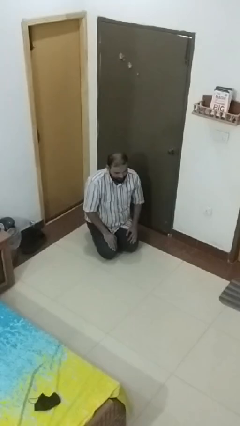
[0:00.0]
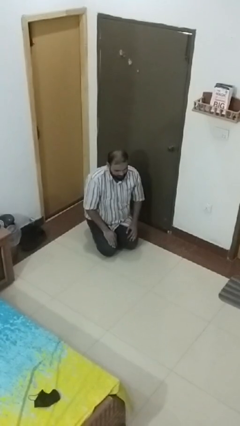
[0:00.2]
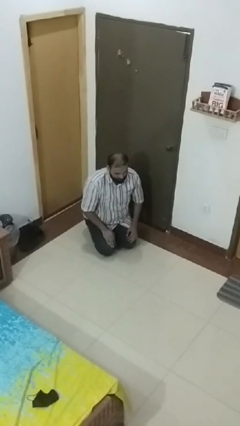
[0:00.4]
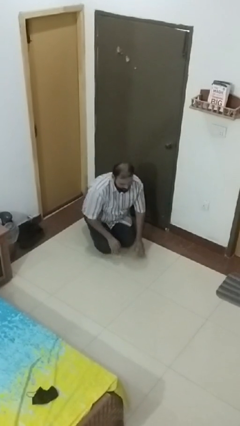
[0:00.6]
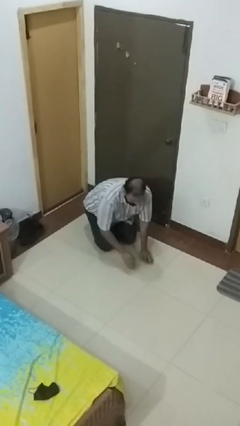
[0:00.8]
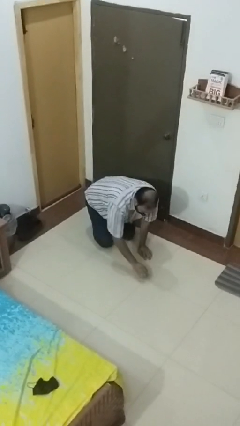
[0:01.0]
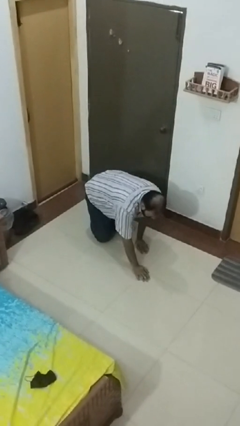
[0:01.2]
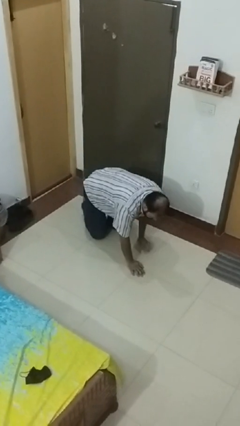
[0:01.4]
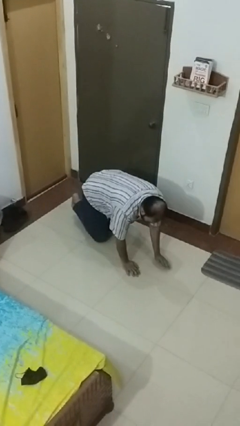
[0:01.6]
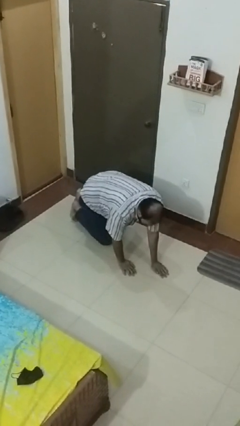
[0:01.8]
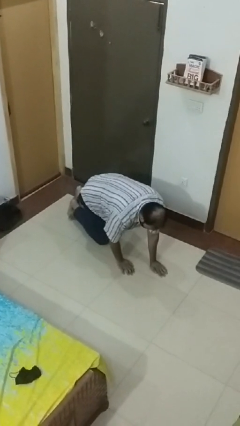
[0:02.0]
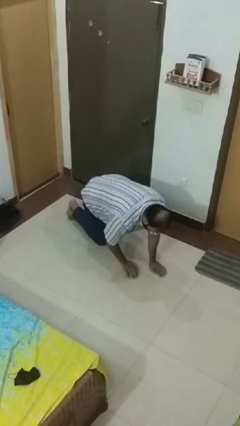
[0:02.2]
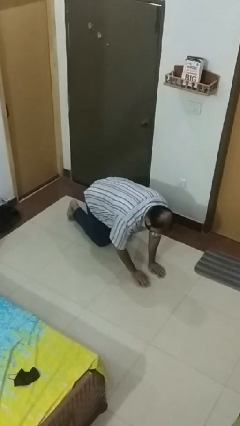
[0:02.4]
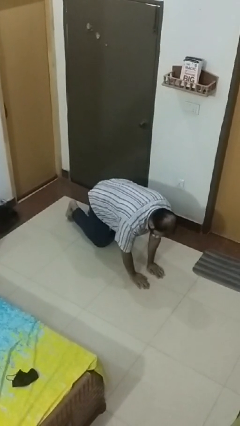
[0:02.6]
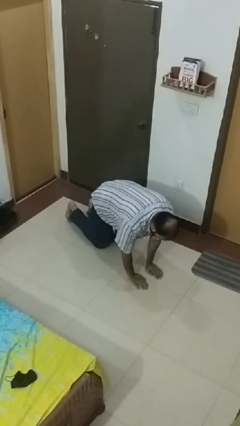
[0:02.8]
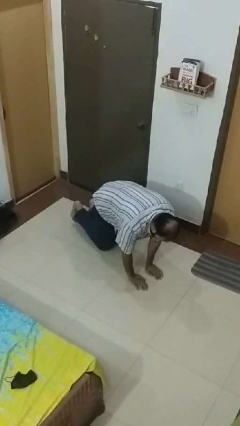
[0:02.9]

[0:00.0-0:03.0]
person crawls

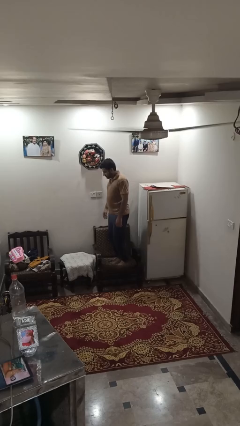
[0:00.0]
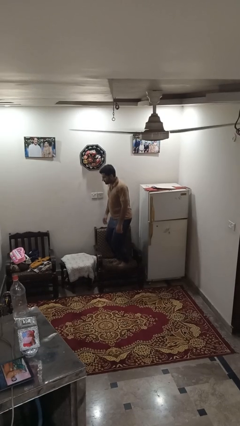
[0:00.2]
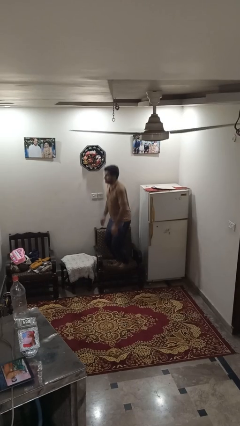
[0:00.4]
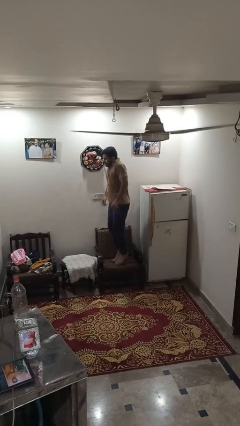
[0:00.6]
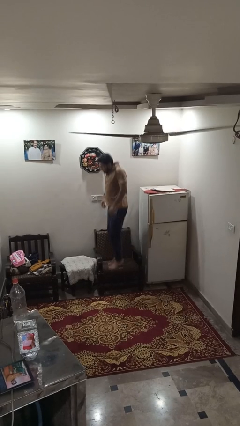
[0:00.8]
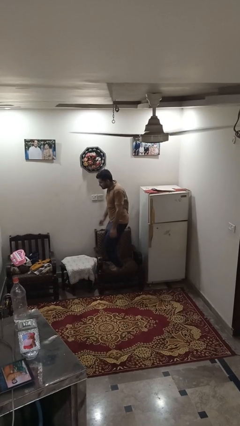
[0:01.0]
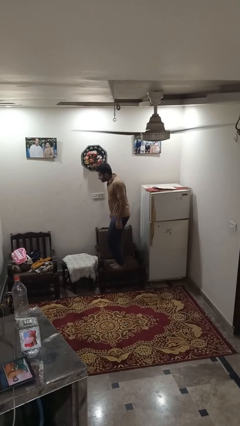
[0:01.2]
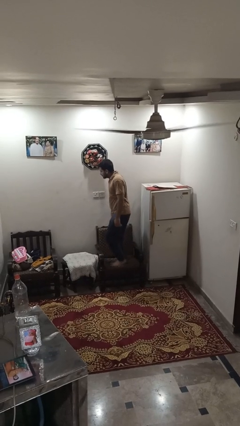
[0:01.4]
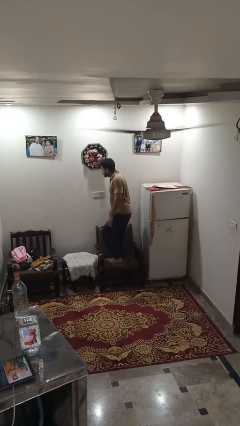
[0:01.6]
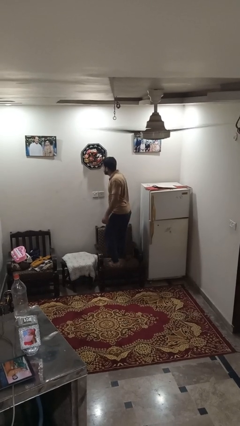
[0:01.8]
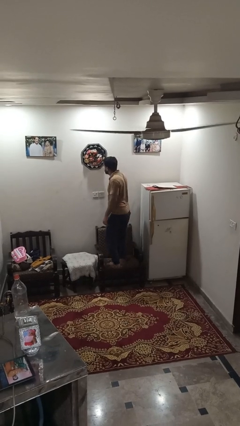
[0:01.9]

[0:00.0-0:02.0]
person jumps on couch

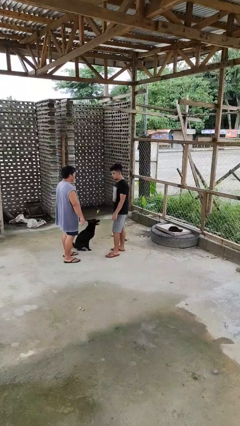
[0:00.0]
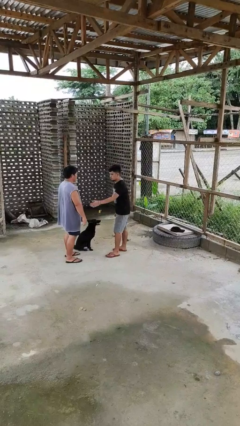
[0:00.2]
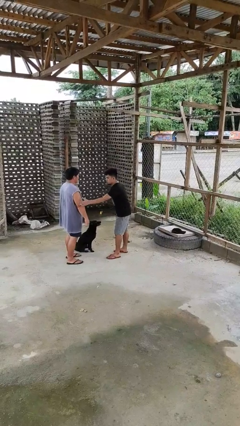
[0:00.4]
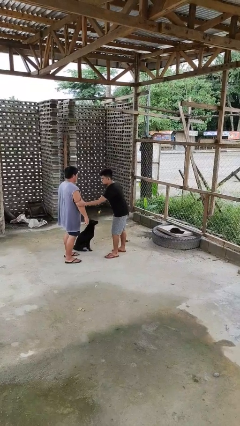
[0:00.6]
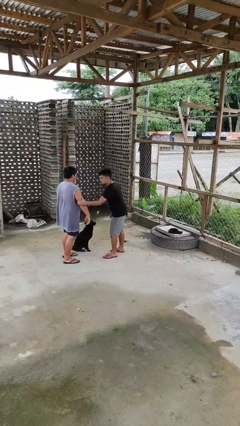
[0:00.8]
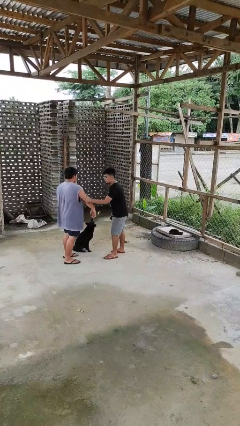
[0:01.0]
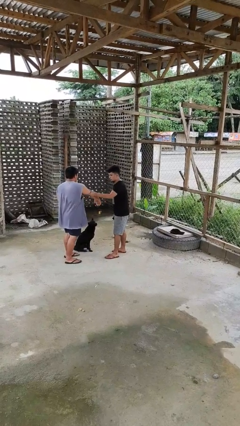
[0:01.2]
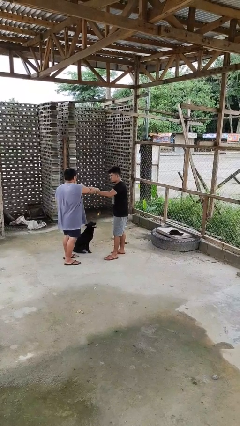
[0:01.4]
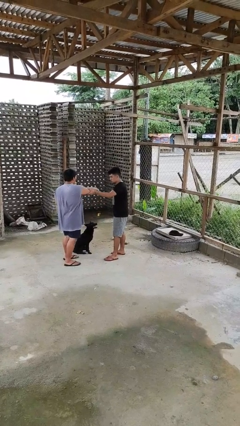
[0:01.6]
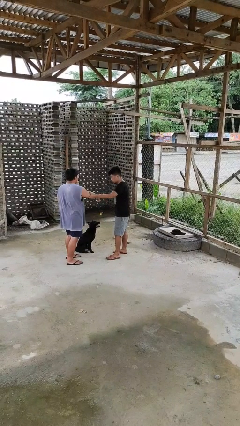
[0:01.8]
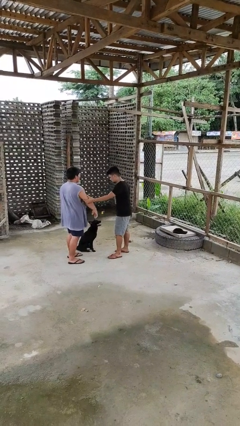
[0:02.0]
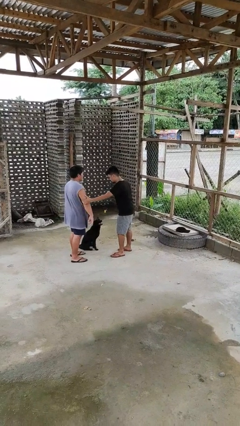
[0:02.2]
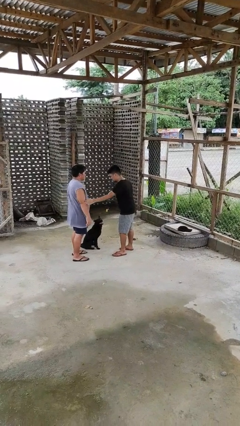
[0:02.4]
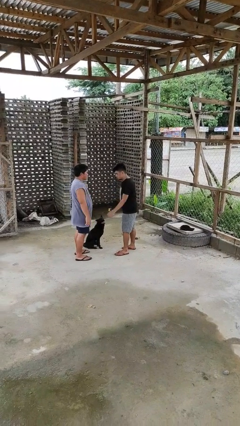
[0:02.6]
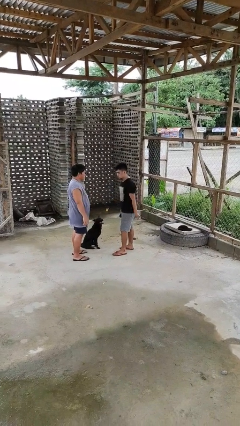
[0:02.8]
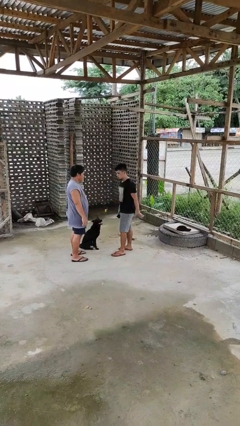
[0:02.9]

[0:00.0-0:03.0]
person grabs person by bicep

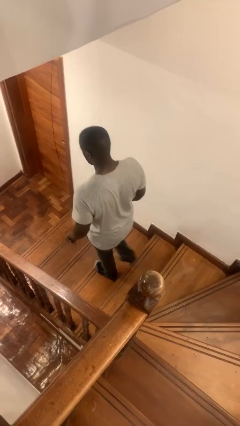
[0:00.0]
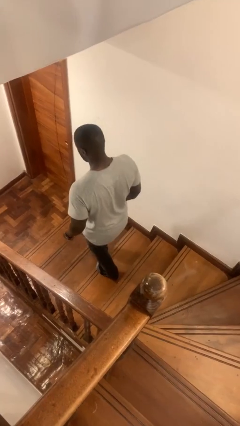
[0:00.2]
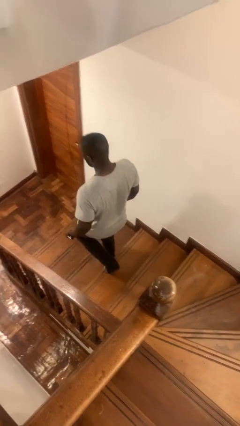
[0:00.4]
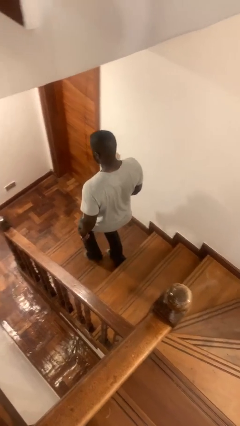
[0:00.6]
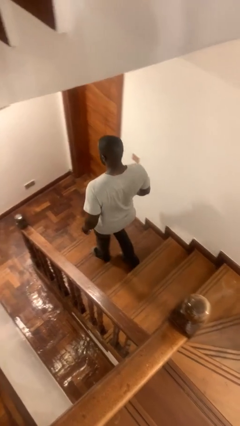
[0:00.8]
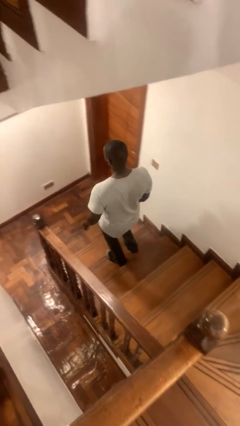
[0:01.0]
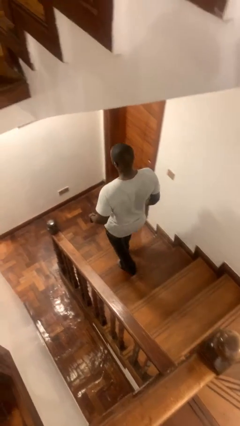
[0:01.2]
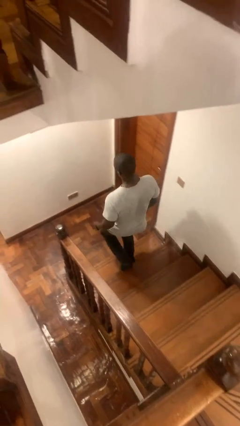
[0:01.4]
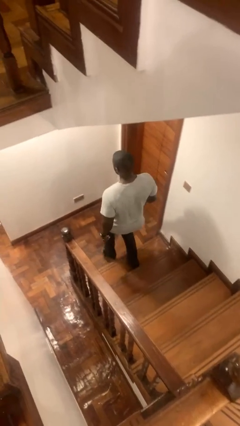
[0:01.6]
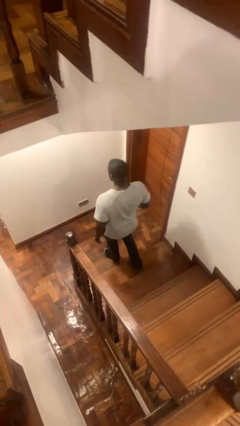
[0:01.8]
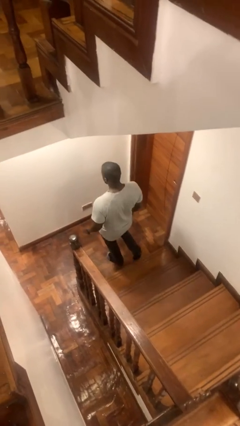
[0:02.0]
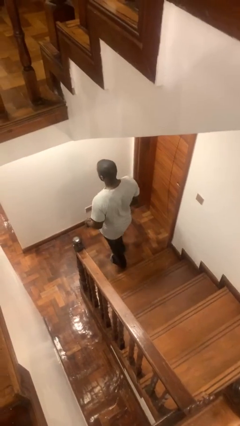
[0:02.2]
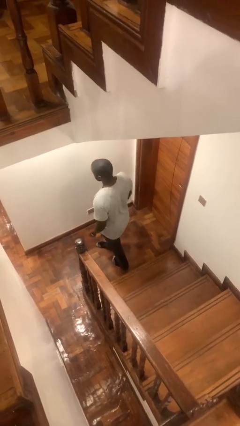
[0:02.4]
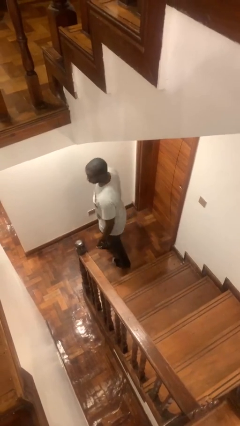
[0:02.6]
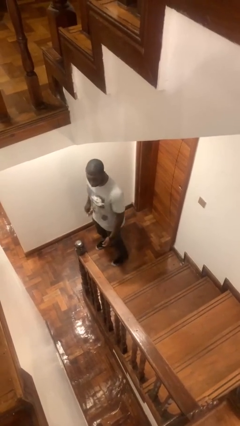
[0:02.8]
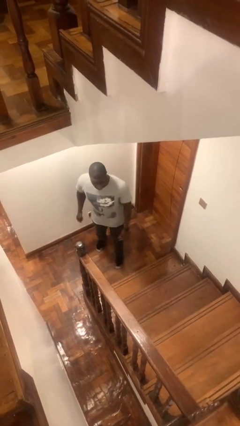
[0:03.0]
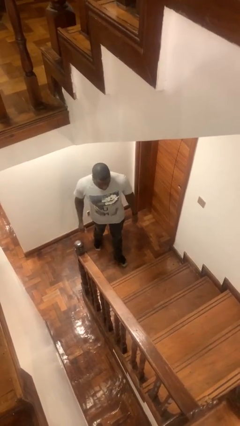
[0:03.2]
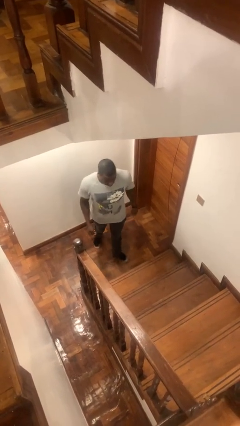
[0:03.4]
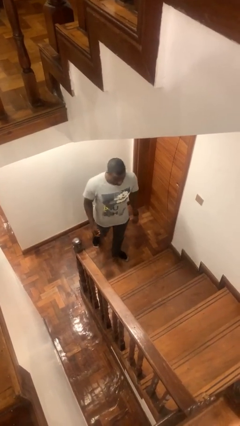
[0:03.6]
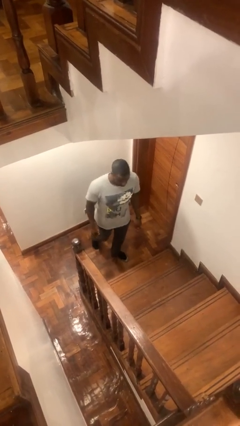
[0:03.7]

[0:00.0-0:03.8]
person climbs down stairs

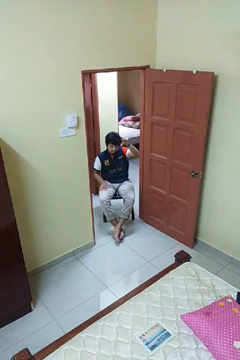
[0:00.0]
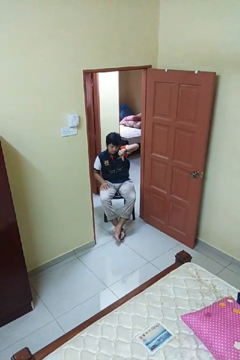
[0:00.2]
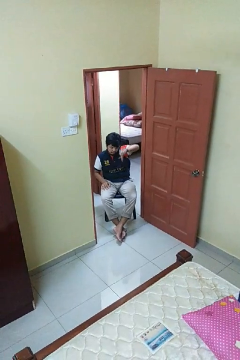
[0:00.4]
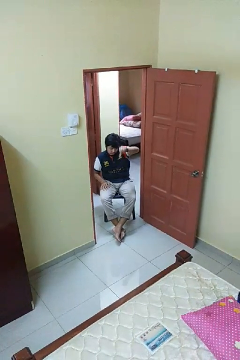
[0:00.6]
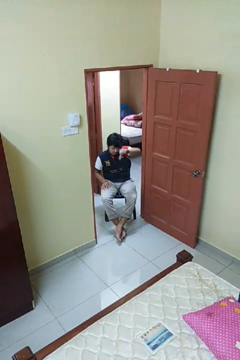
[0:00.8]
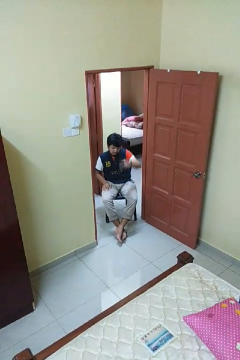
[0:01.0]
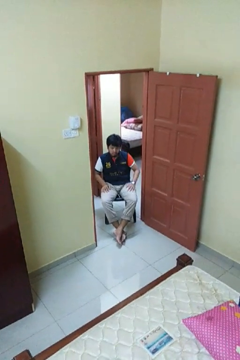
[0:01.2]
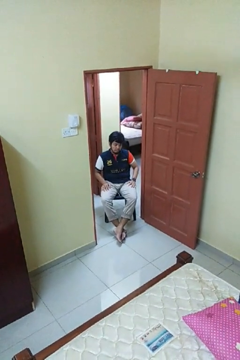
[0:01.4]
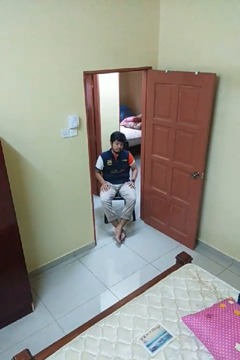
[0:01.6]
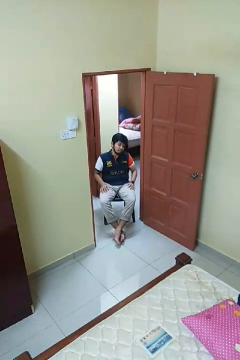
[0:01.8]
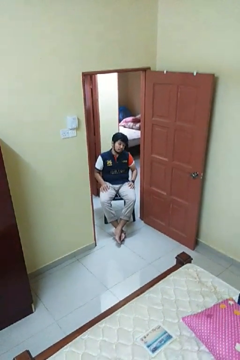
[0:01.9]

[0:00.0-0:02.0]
person gestures thumbs down

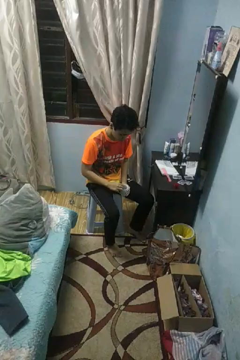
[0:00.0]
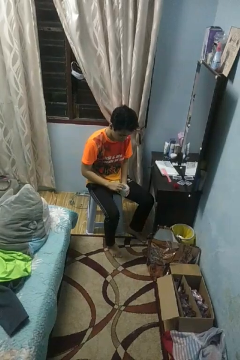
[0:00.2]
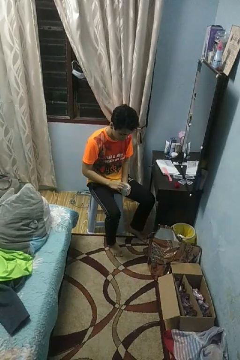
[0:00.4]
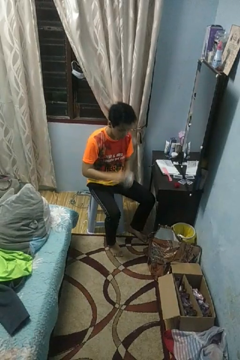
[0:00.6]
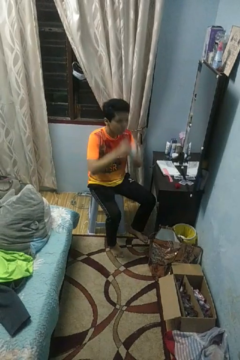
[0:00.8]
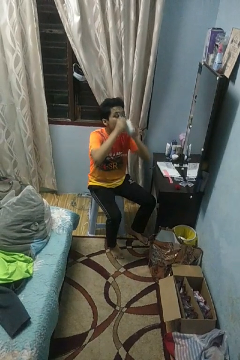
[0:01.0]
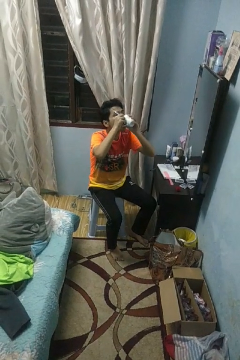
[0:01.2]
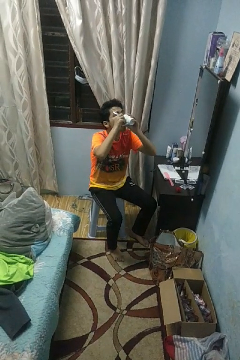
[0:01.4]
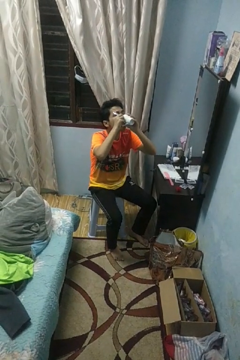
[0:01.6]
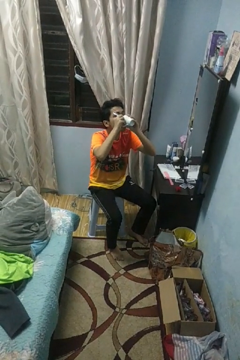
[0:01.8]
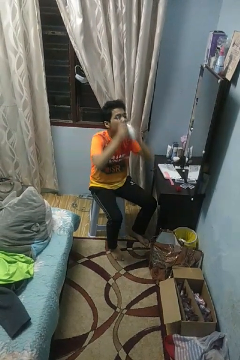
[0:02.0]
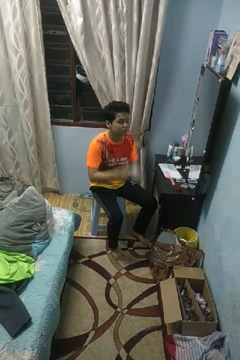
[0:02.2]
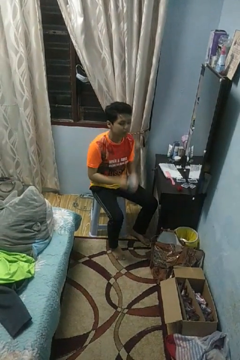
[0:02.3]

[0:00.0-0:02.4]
person drinks from mug

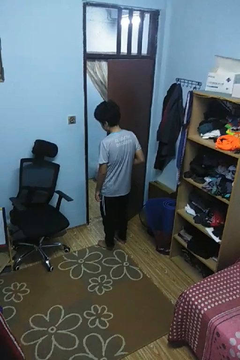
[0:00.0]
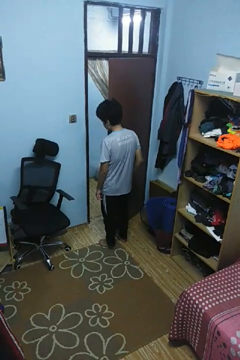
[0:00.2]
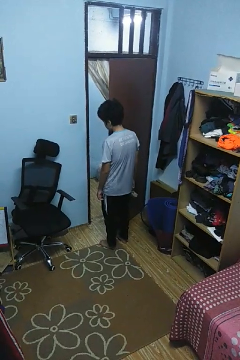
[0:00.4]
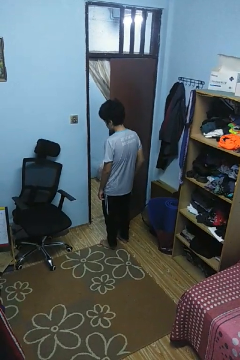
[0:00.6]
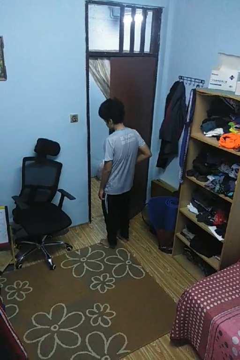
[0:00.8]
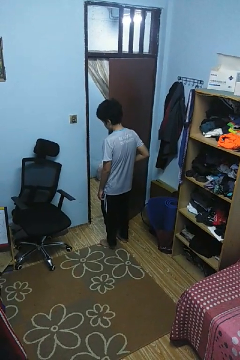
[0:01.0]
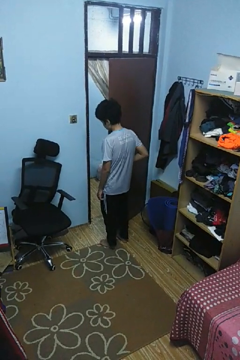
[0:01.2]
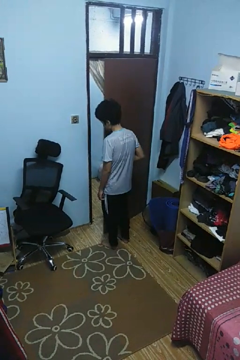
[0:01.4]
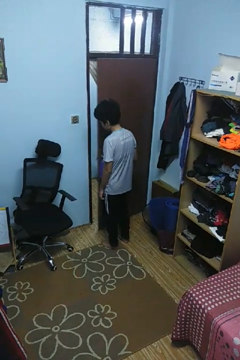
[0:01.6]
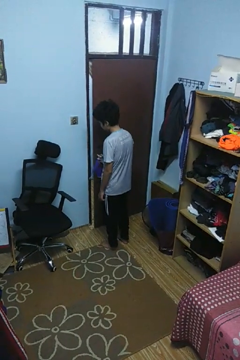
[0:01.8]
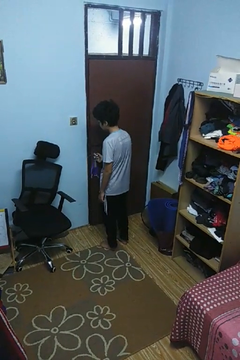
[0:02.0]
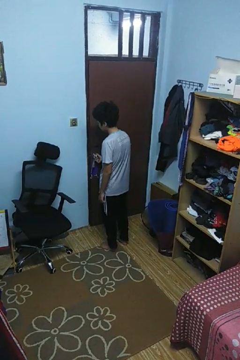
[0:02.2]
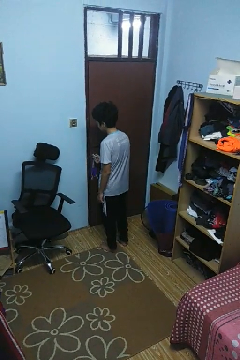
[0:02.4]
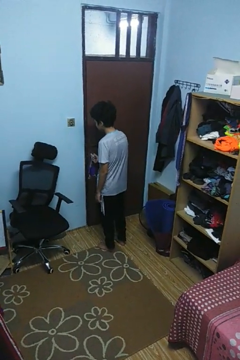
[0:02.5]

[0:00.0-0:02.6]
person closes facility door
